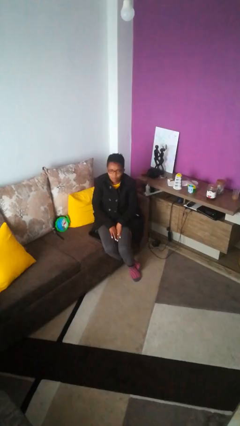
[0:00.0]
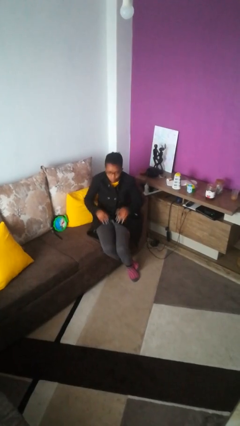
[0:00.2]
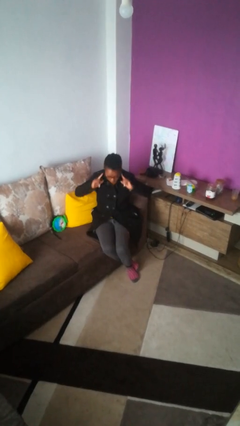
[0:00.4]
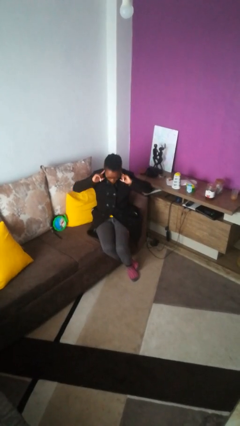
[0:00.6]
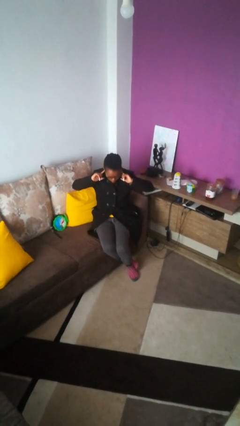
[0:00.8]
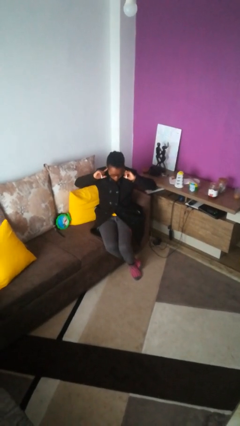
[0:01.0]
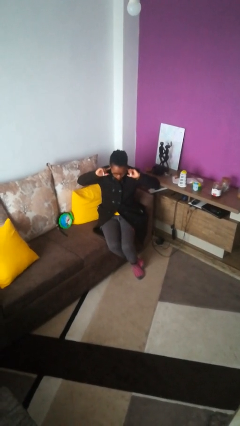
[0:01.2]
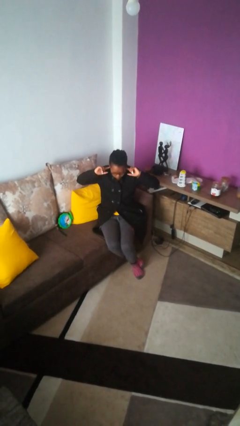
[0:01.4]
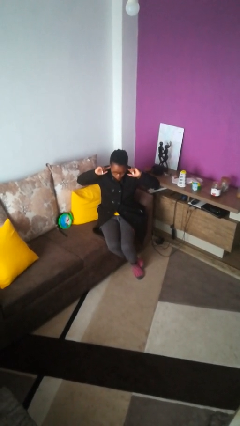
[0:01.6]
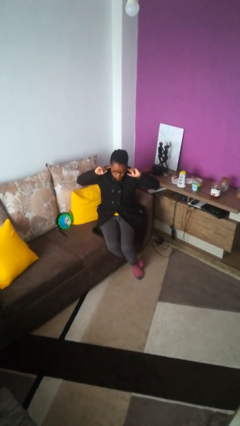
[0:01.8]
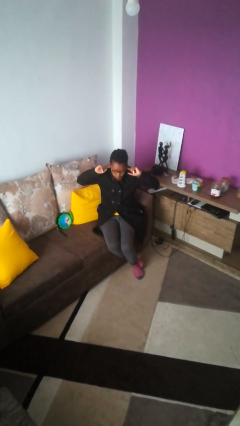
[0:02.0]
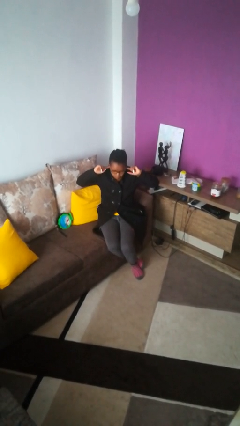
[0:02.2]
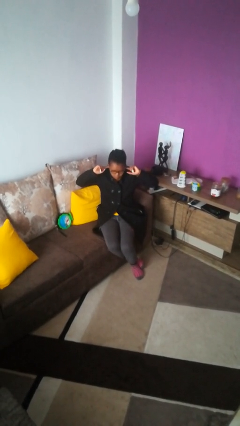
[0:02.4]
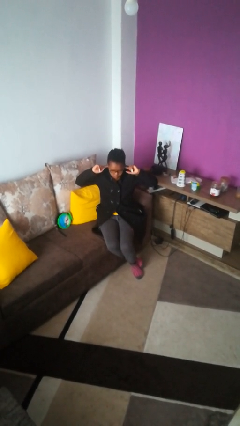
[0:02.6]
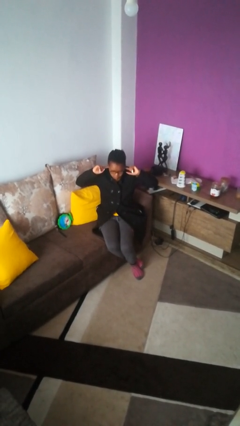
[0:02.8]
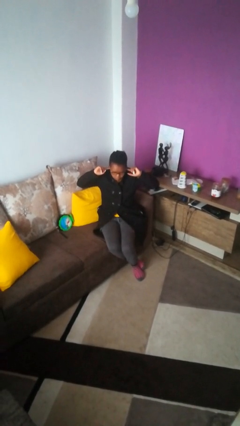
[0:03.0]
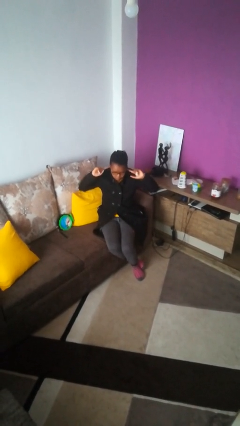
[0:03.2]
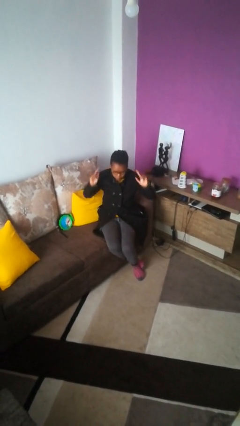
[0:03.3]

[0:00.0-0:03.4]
person puts fingers in ear

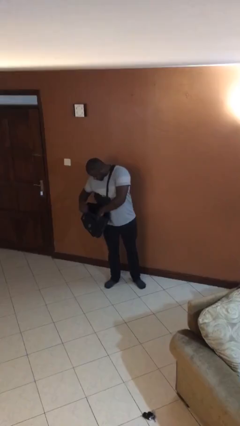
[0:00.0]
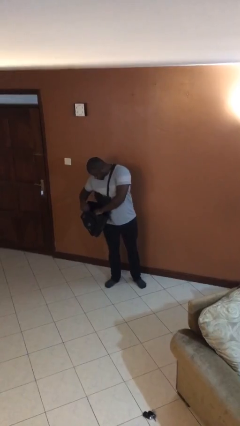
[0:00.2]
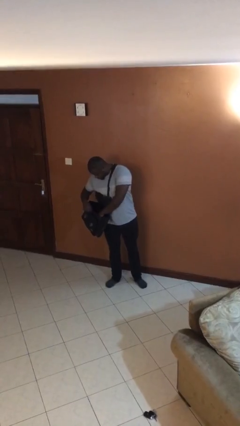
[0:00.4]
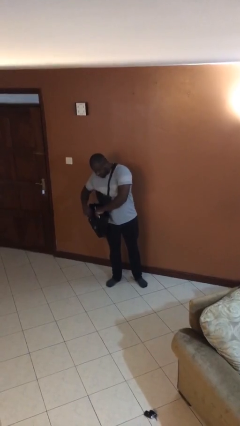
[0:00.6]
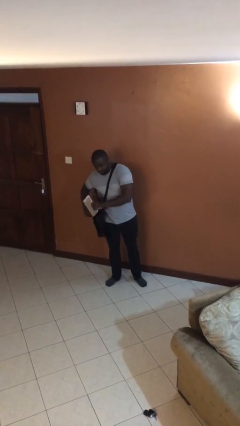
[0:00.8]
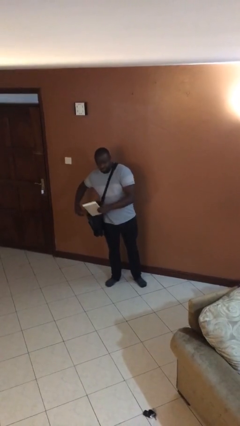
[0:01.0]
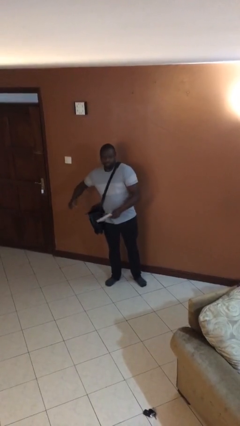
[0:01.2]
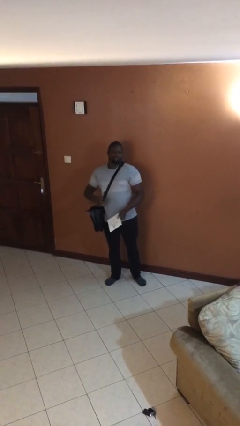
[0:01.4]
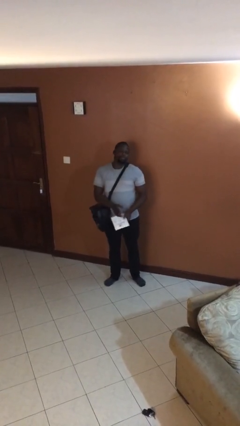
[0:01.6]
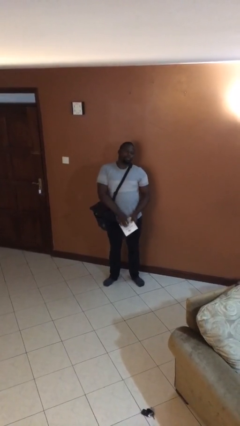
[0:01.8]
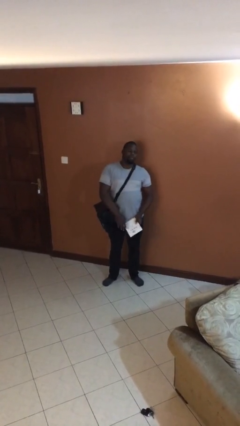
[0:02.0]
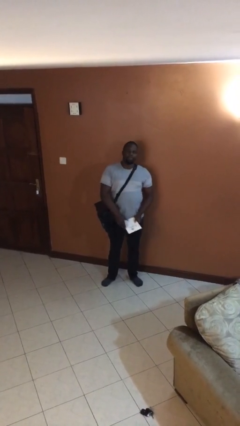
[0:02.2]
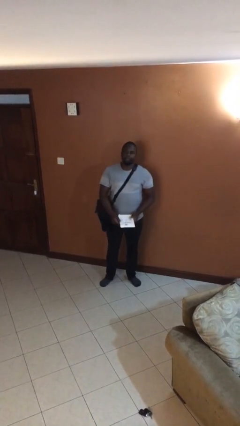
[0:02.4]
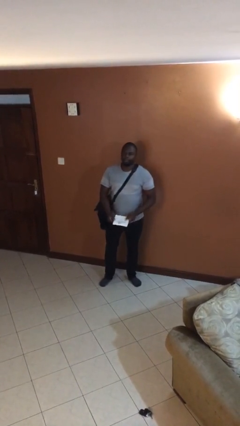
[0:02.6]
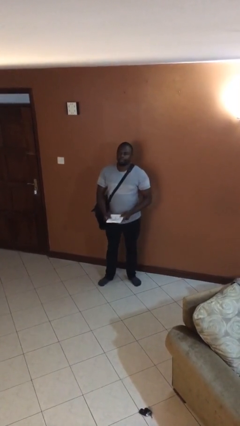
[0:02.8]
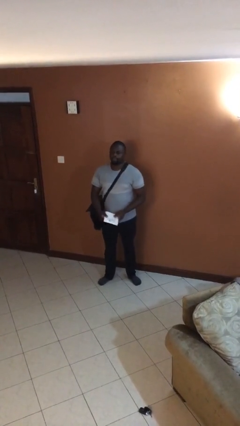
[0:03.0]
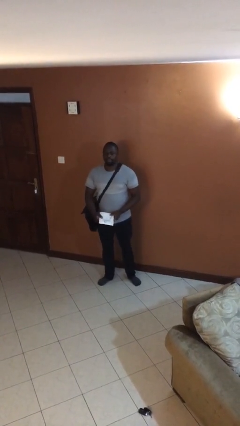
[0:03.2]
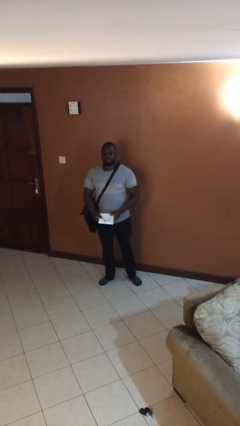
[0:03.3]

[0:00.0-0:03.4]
person takes object from purse

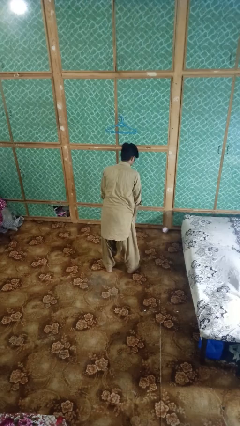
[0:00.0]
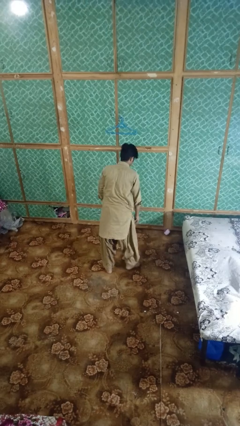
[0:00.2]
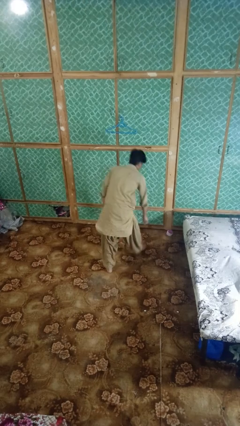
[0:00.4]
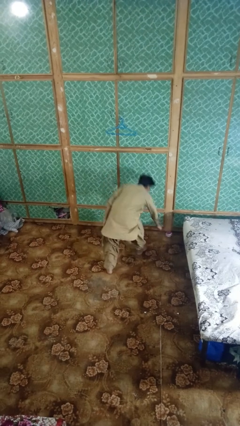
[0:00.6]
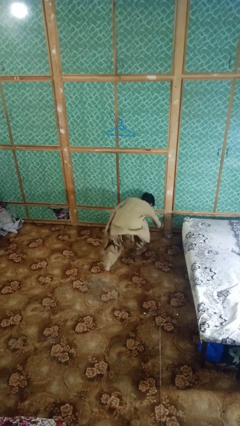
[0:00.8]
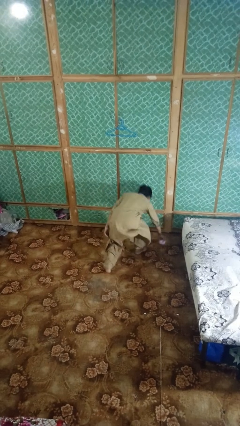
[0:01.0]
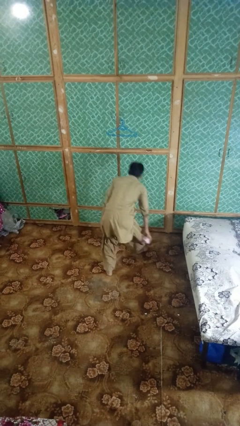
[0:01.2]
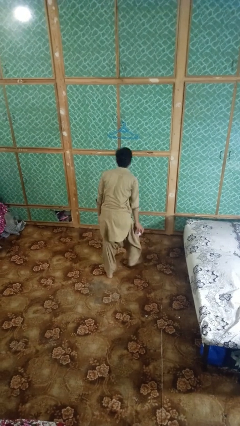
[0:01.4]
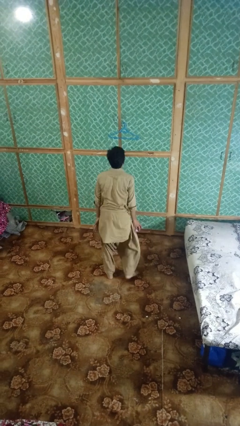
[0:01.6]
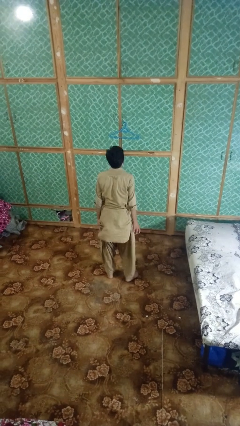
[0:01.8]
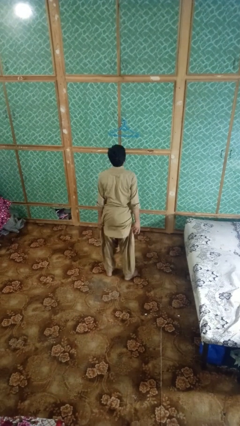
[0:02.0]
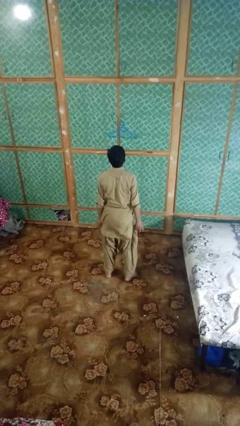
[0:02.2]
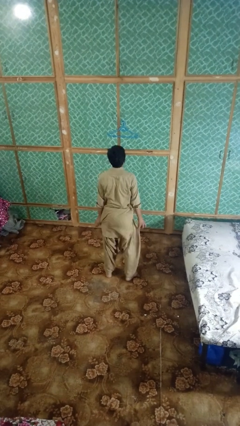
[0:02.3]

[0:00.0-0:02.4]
person picks up object from floor

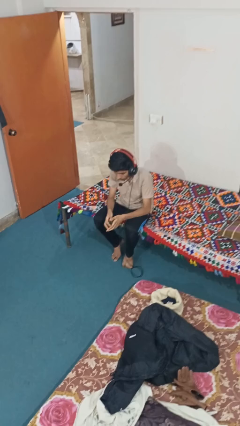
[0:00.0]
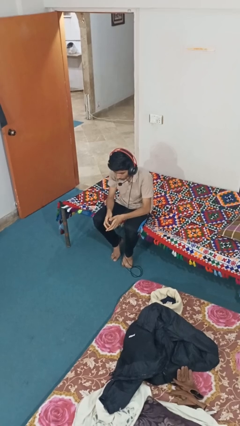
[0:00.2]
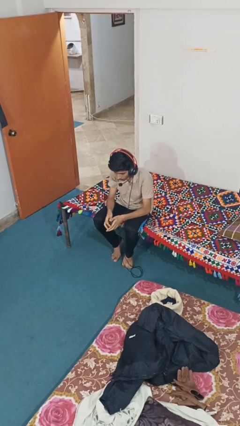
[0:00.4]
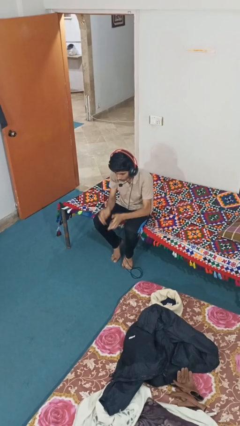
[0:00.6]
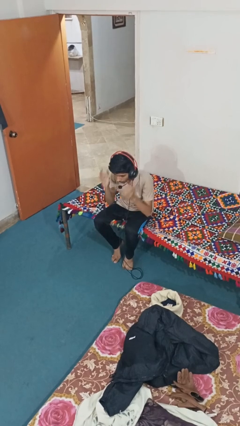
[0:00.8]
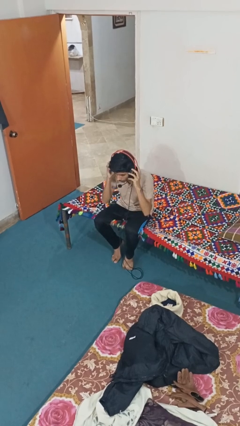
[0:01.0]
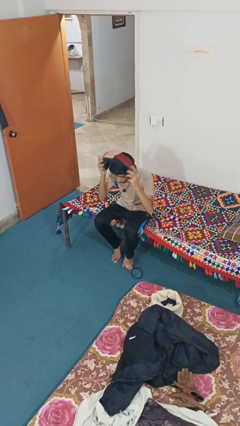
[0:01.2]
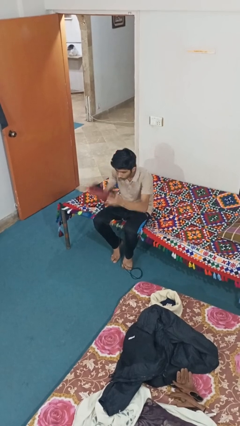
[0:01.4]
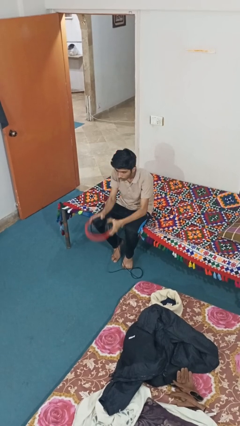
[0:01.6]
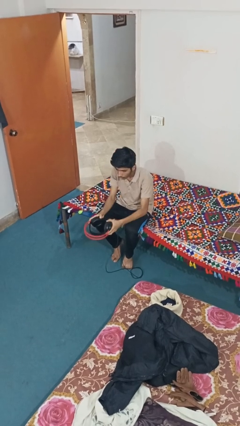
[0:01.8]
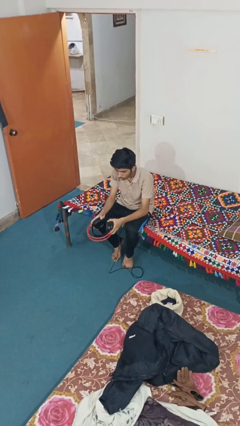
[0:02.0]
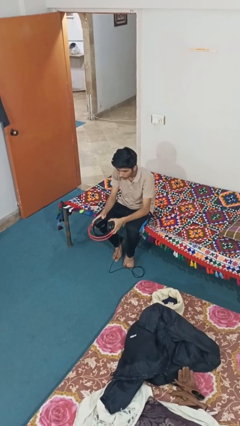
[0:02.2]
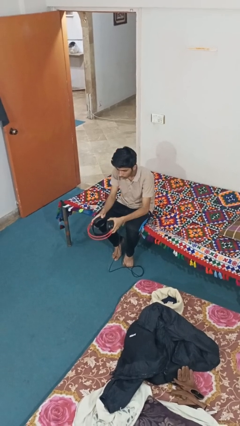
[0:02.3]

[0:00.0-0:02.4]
person takes off headphones

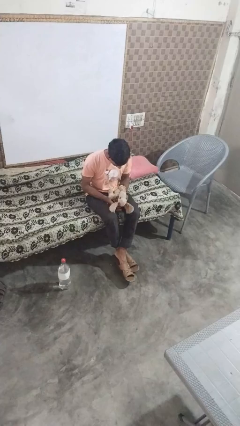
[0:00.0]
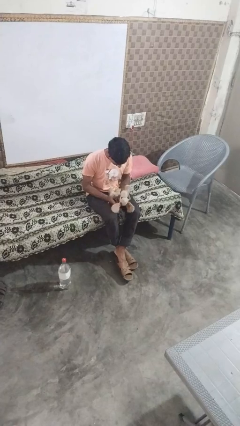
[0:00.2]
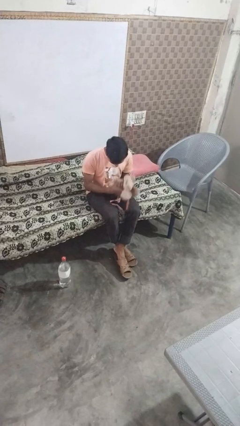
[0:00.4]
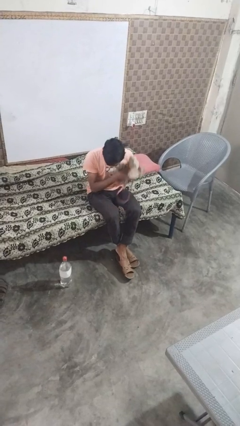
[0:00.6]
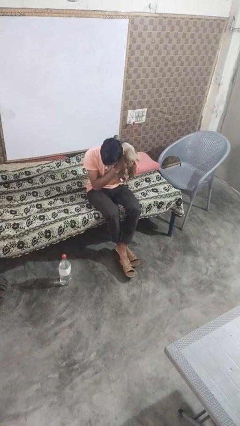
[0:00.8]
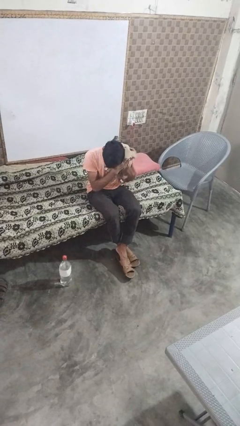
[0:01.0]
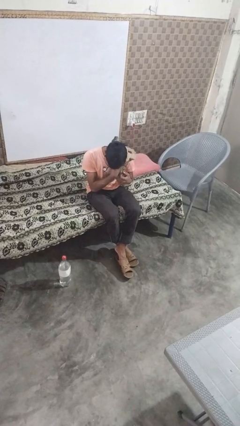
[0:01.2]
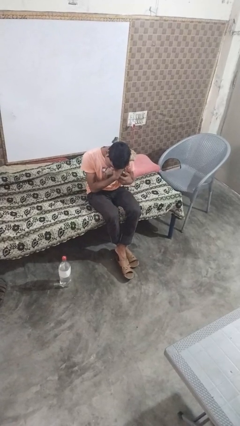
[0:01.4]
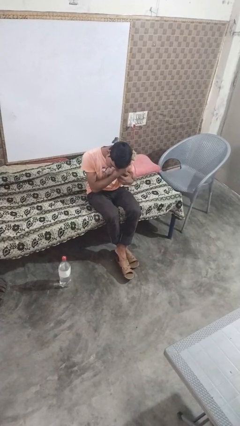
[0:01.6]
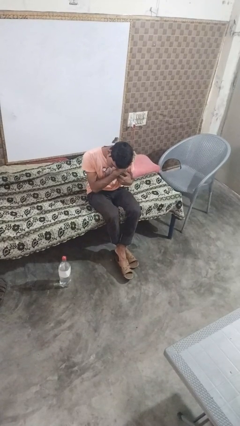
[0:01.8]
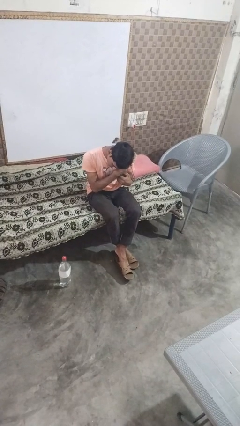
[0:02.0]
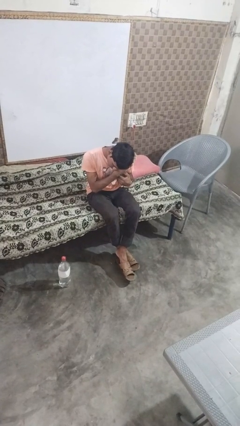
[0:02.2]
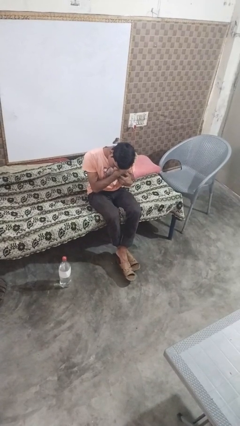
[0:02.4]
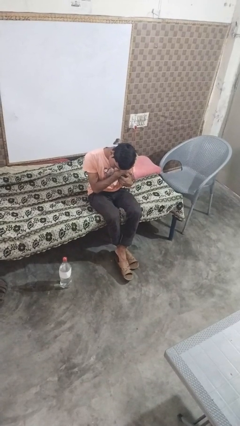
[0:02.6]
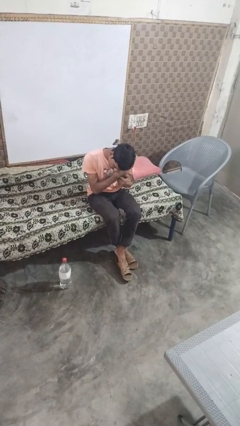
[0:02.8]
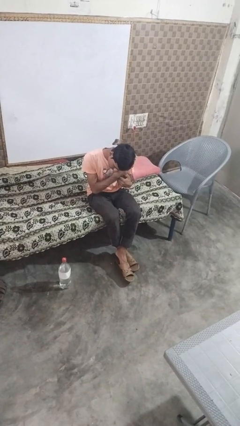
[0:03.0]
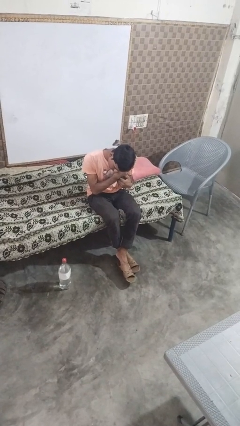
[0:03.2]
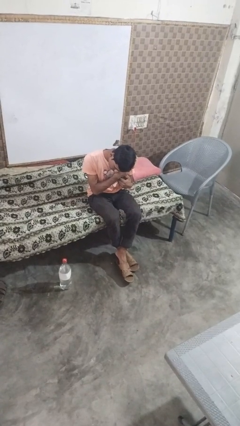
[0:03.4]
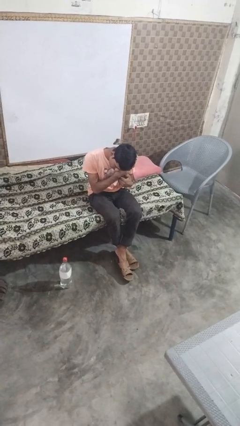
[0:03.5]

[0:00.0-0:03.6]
person hugs stuffed animal

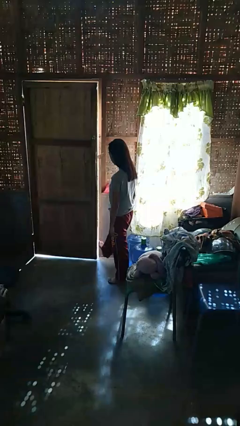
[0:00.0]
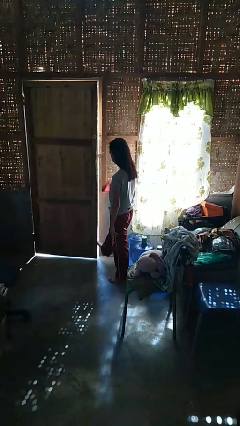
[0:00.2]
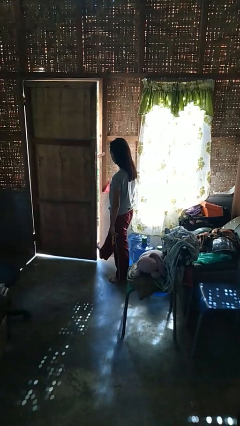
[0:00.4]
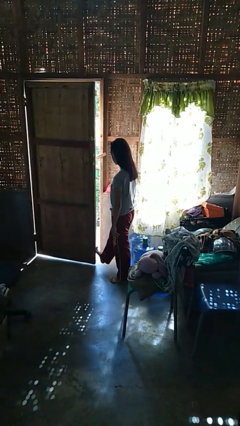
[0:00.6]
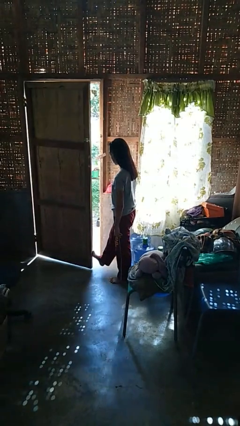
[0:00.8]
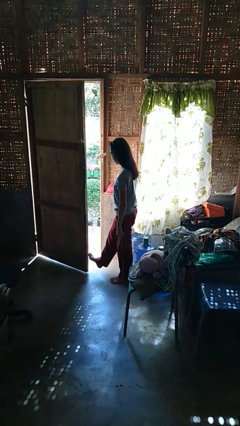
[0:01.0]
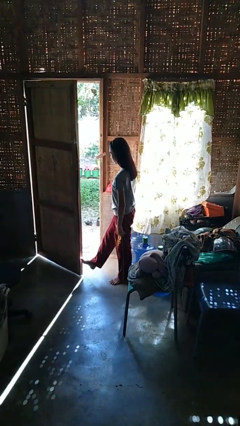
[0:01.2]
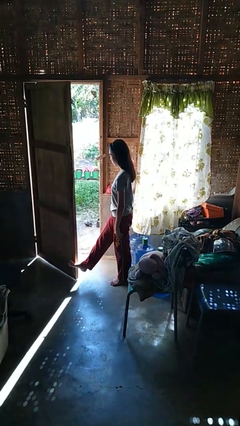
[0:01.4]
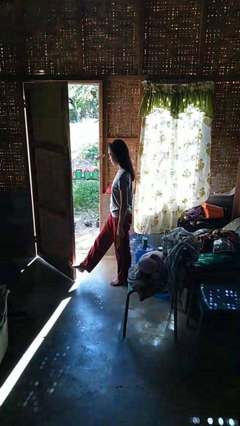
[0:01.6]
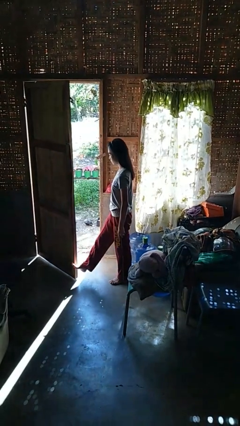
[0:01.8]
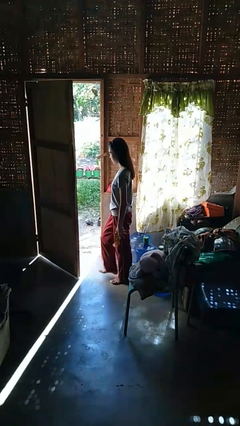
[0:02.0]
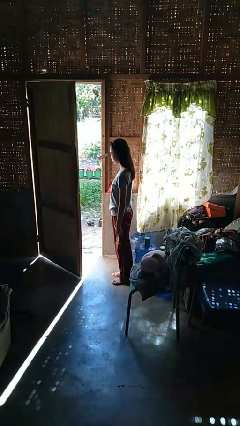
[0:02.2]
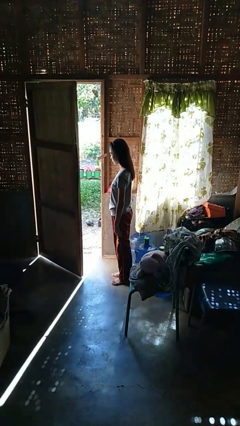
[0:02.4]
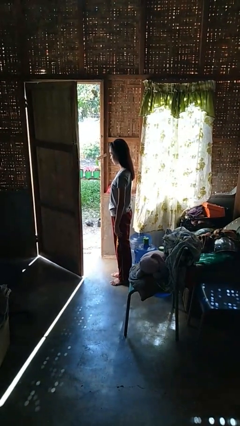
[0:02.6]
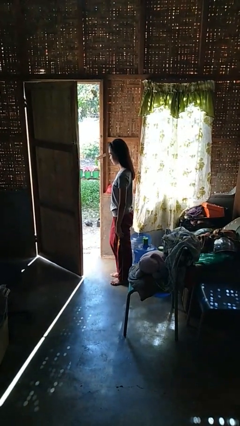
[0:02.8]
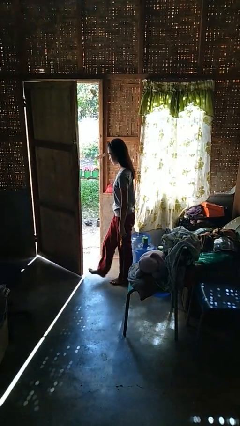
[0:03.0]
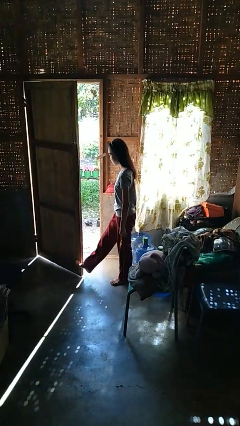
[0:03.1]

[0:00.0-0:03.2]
person opens facility door
